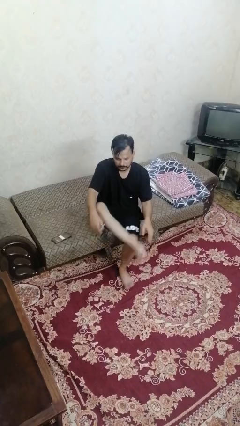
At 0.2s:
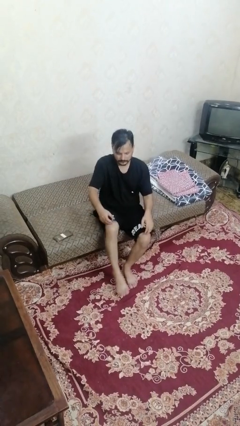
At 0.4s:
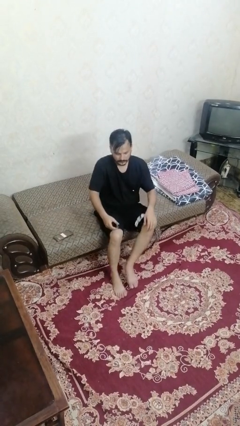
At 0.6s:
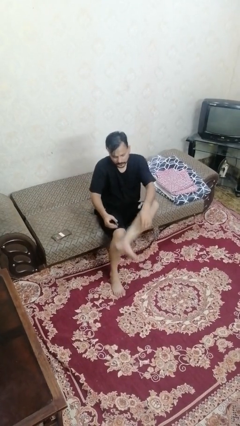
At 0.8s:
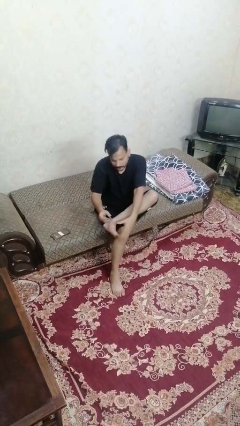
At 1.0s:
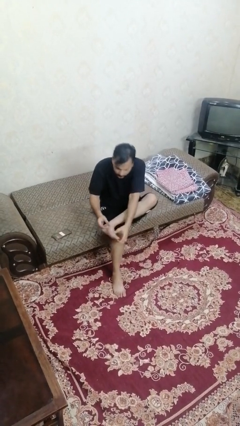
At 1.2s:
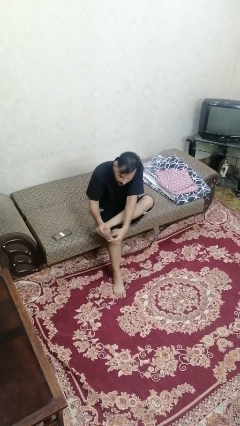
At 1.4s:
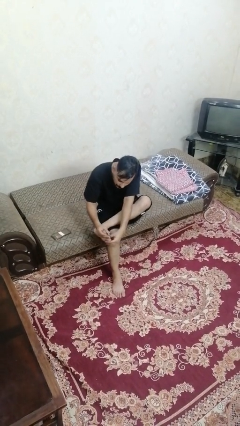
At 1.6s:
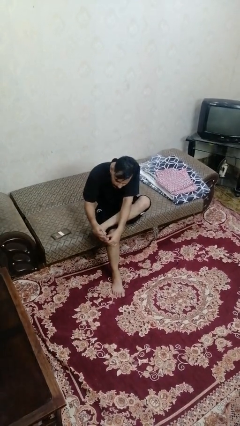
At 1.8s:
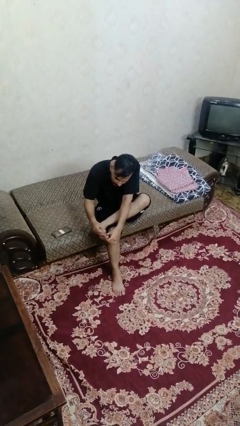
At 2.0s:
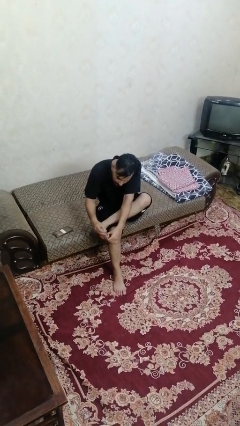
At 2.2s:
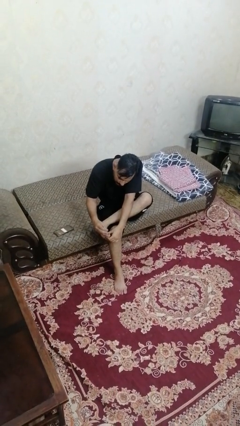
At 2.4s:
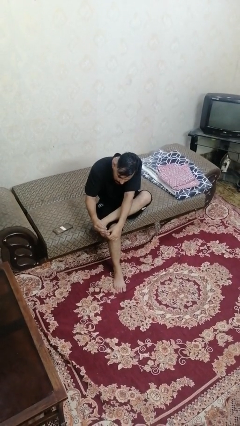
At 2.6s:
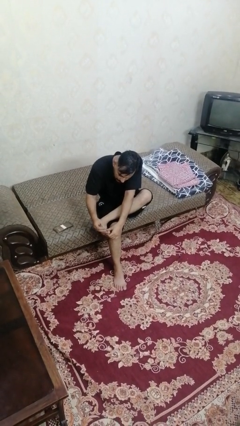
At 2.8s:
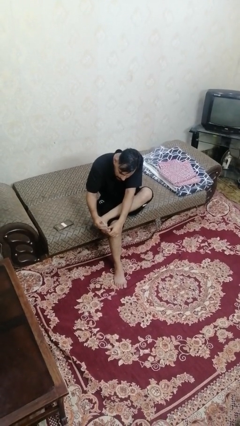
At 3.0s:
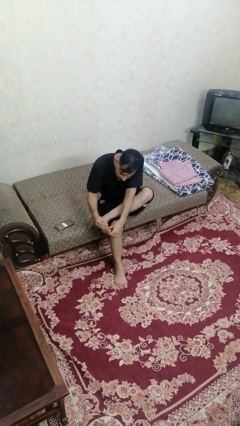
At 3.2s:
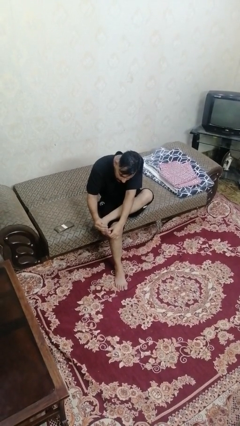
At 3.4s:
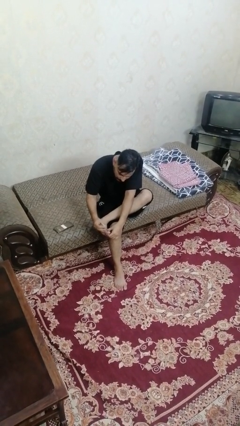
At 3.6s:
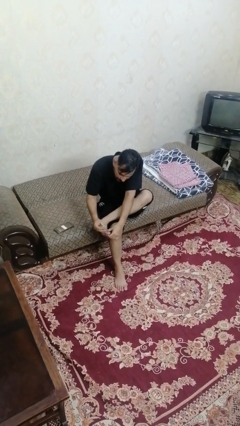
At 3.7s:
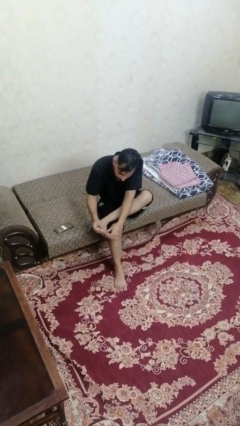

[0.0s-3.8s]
person clips fingernails

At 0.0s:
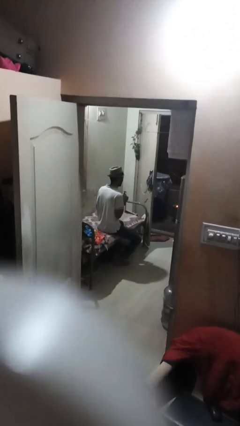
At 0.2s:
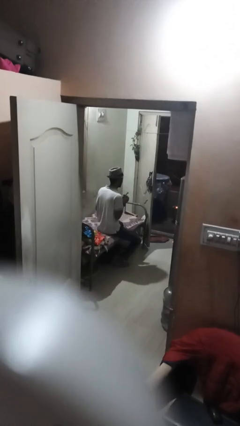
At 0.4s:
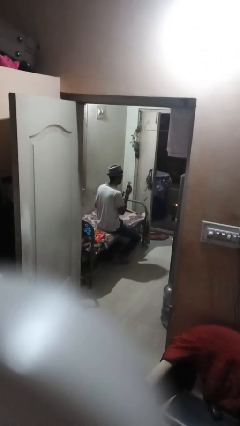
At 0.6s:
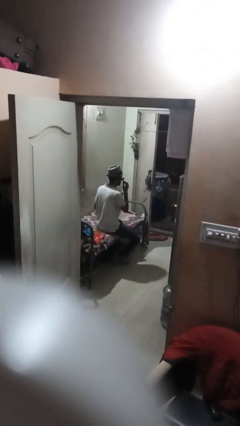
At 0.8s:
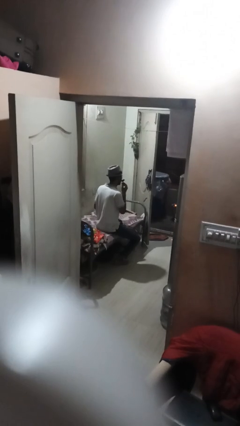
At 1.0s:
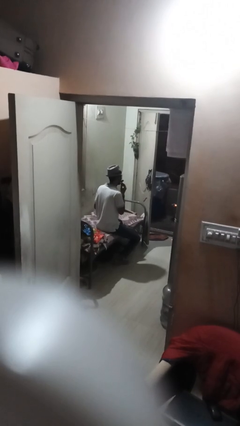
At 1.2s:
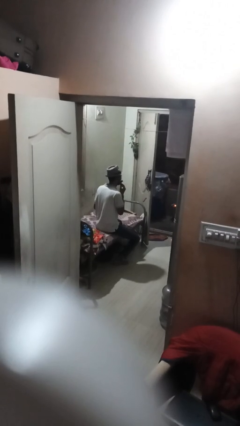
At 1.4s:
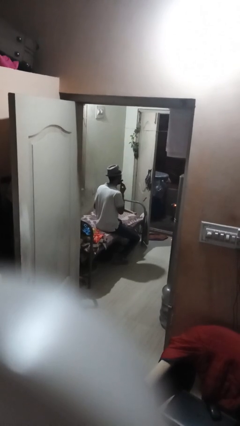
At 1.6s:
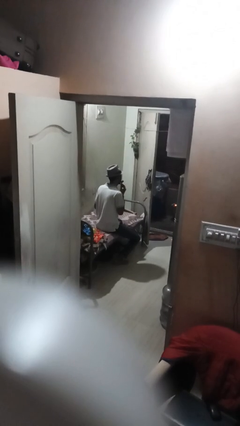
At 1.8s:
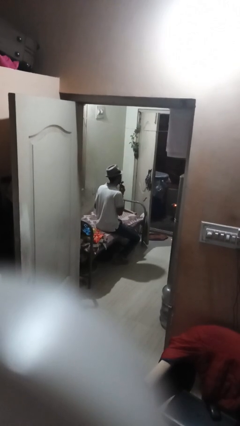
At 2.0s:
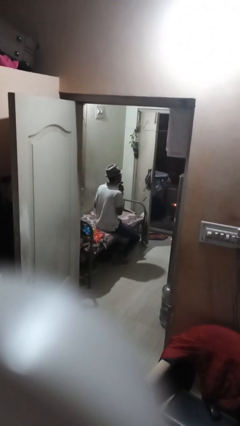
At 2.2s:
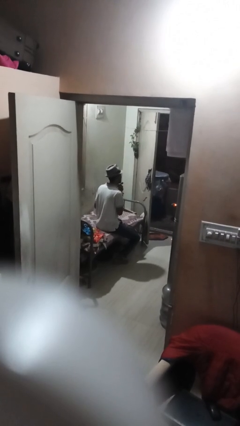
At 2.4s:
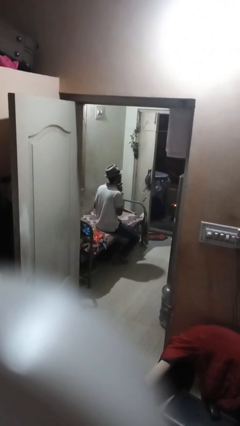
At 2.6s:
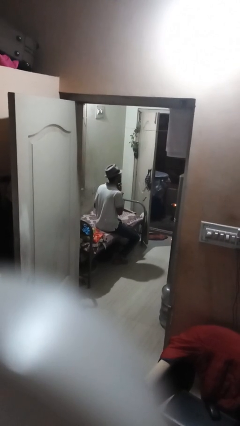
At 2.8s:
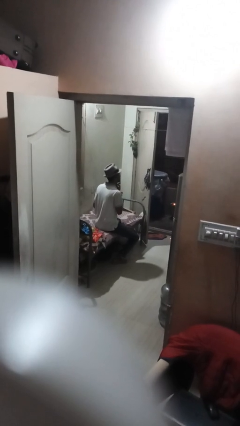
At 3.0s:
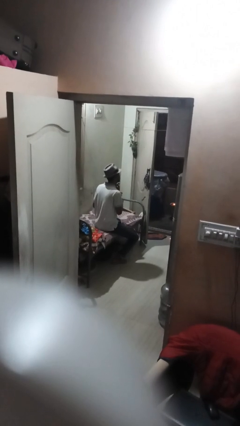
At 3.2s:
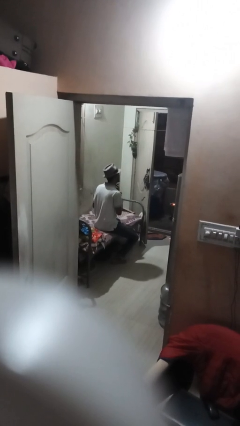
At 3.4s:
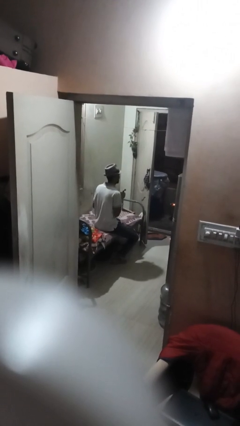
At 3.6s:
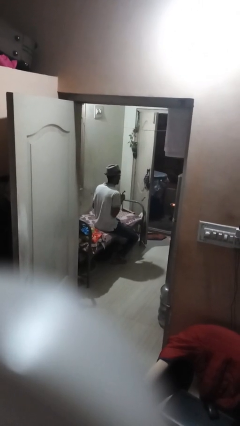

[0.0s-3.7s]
person shaves face

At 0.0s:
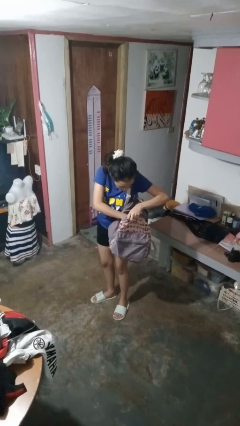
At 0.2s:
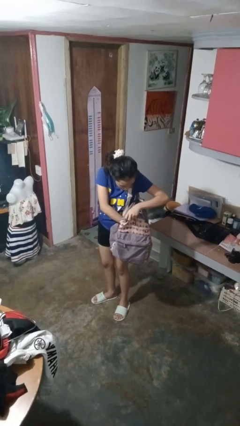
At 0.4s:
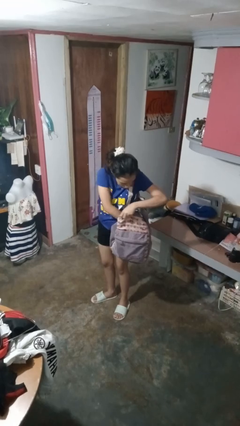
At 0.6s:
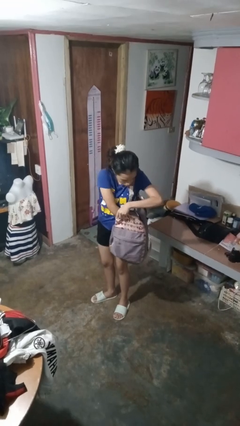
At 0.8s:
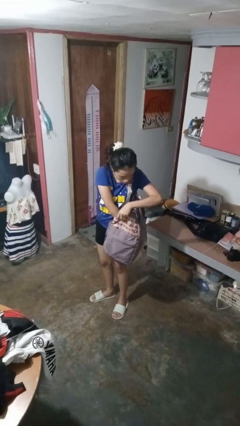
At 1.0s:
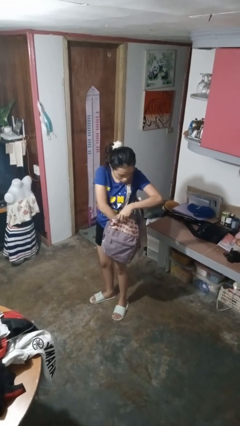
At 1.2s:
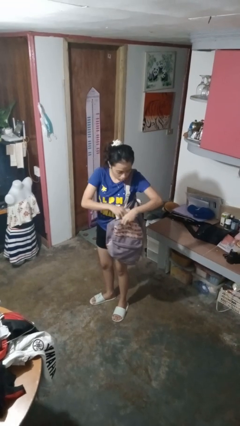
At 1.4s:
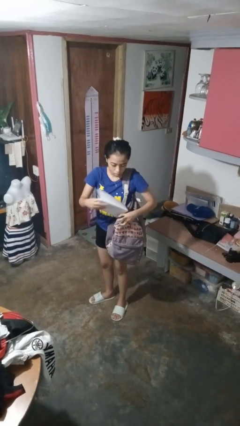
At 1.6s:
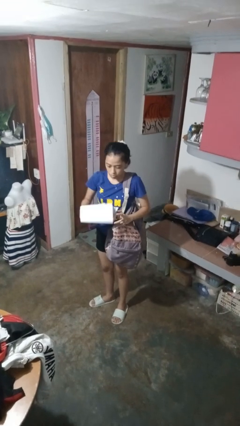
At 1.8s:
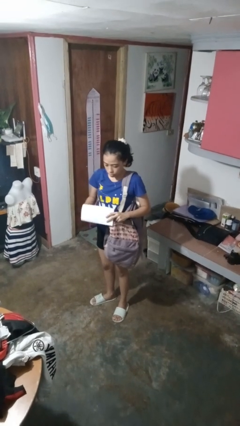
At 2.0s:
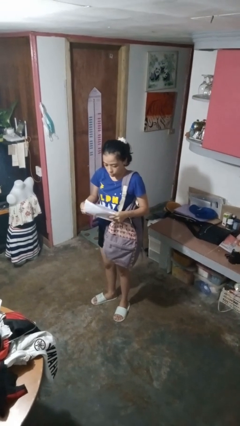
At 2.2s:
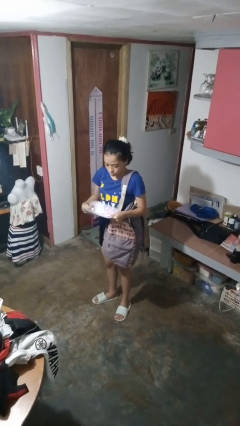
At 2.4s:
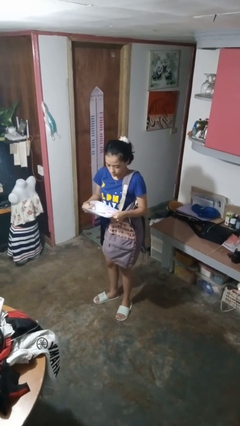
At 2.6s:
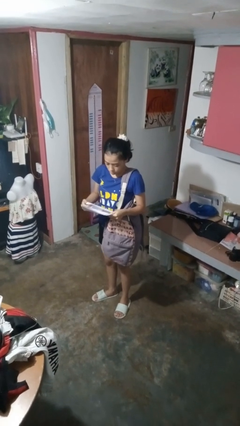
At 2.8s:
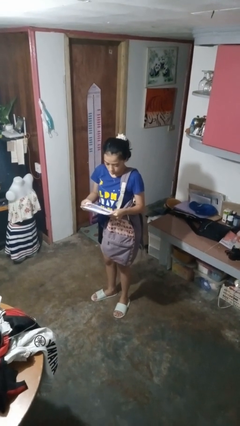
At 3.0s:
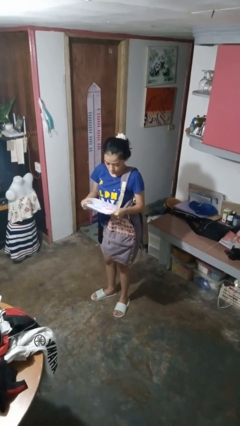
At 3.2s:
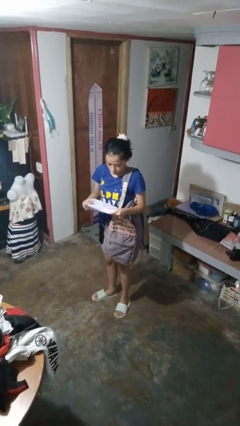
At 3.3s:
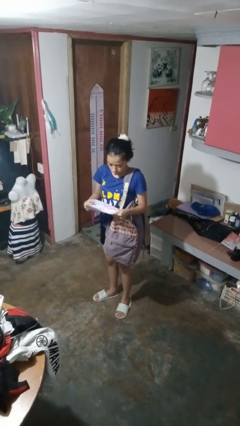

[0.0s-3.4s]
person takes object from backpack

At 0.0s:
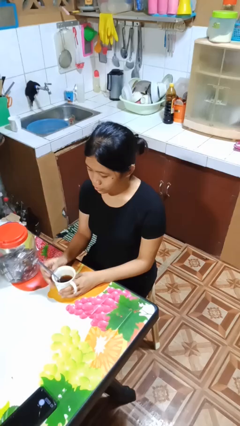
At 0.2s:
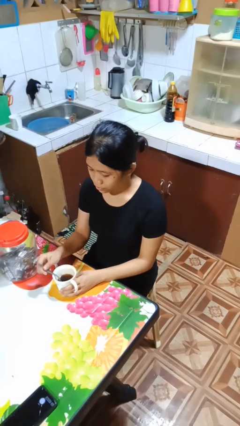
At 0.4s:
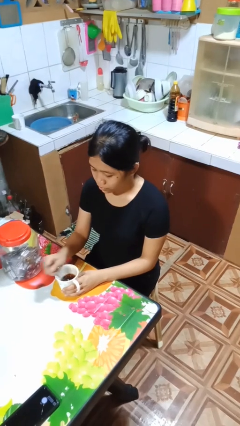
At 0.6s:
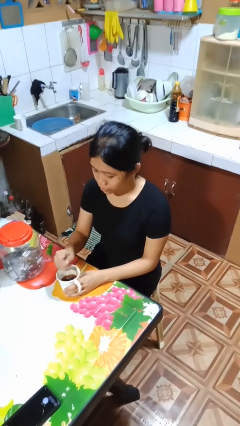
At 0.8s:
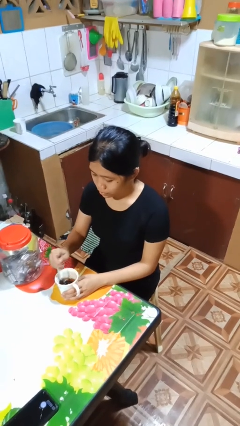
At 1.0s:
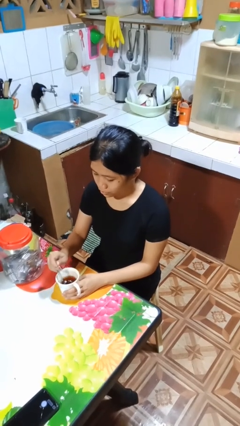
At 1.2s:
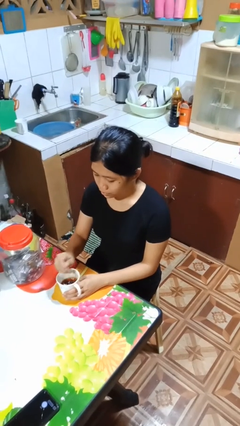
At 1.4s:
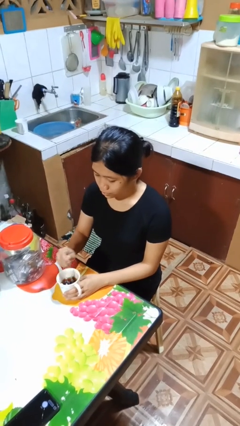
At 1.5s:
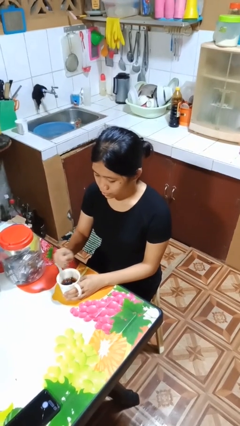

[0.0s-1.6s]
person stirs mug

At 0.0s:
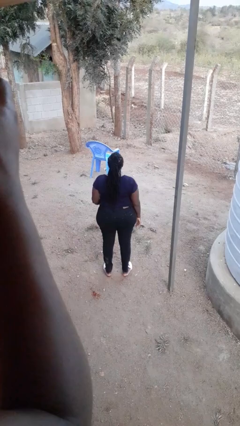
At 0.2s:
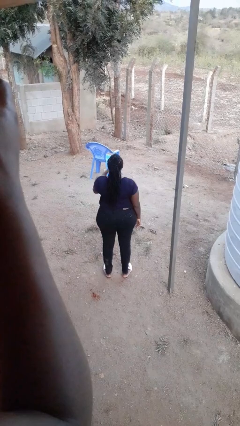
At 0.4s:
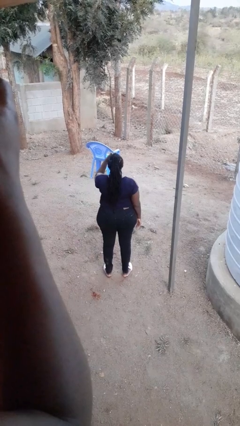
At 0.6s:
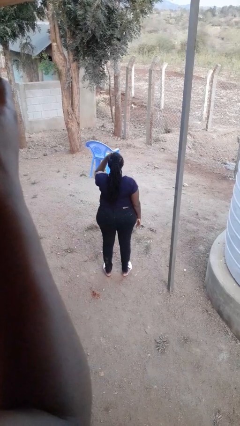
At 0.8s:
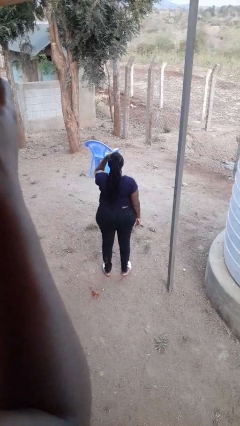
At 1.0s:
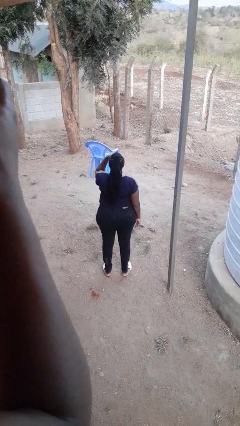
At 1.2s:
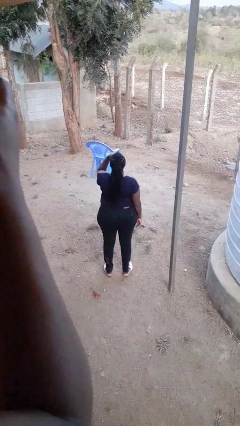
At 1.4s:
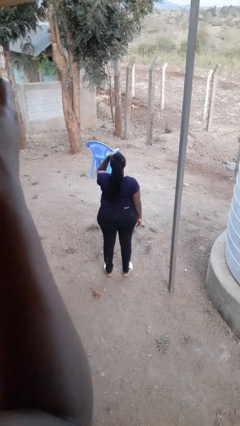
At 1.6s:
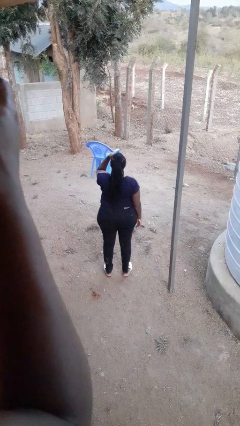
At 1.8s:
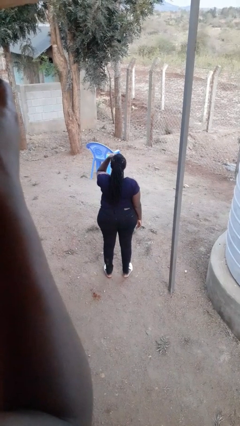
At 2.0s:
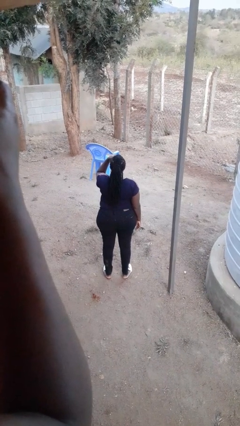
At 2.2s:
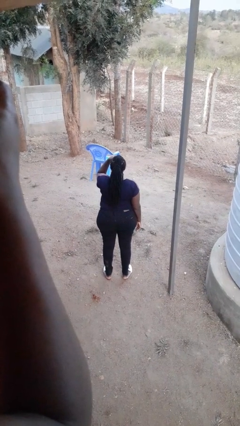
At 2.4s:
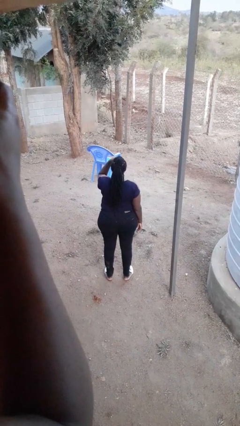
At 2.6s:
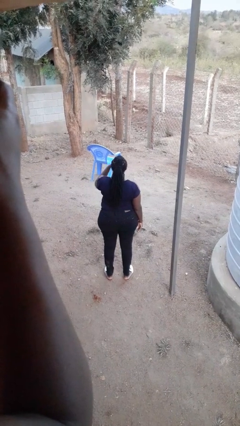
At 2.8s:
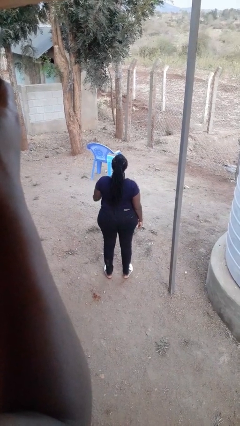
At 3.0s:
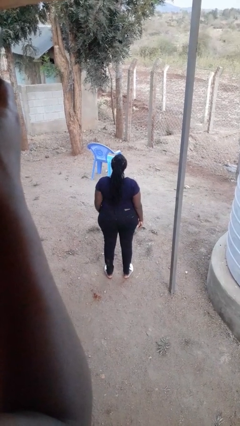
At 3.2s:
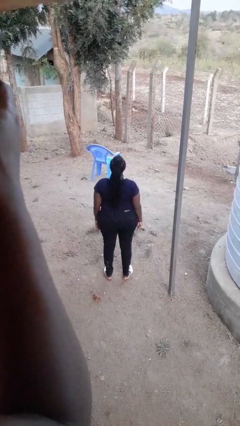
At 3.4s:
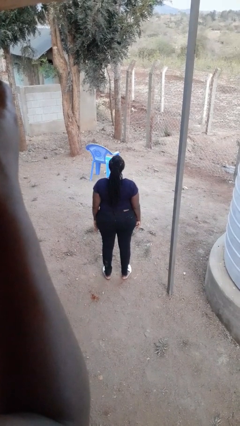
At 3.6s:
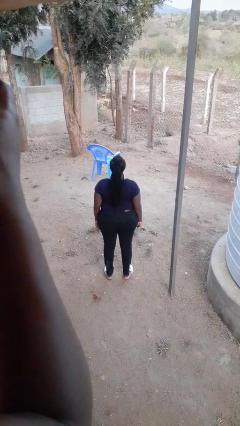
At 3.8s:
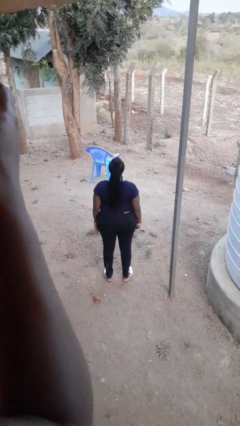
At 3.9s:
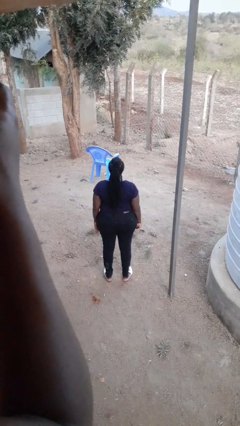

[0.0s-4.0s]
person shades eyes

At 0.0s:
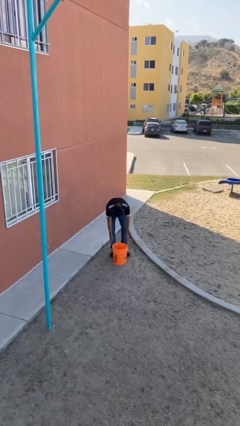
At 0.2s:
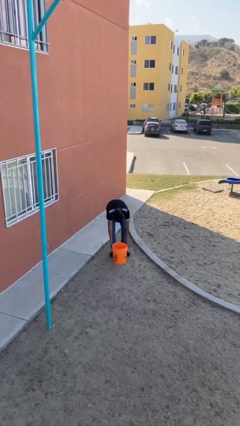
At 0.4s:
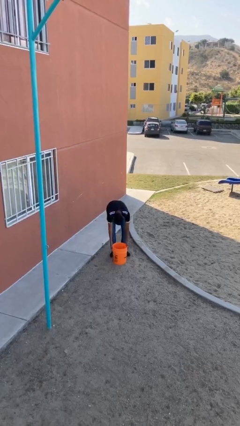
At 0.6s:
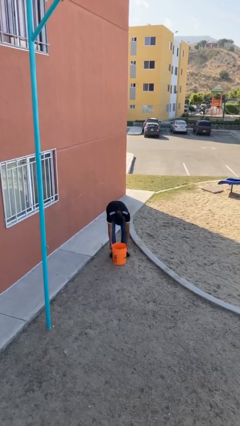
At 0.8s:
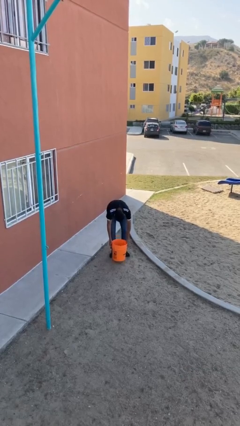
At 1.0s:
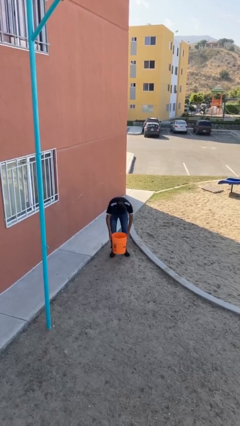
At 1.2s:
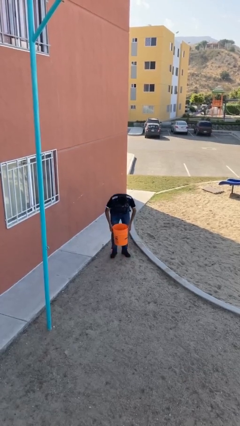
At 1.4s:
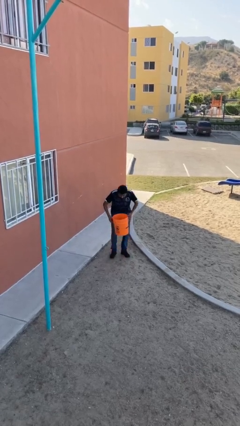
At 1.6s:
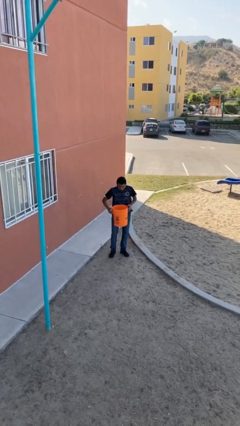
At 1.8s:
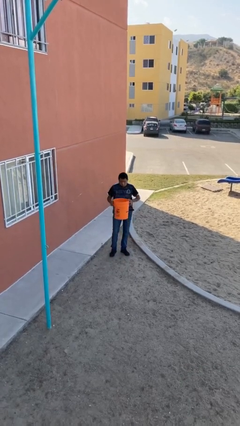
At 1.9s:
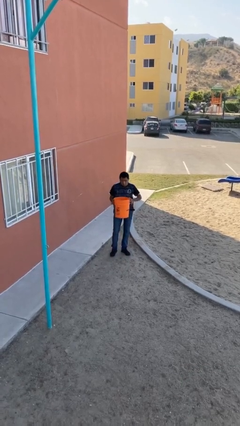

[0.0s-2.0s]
person picks up object from floor
